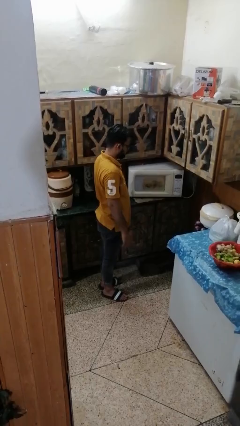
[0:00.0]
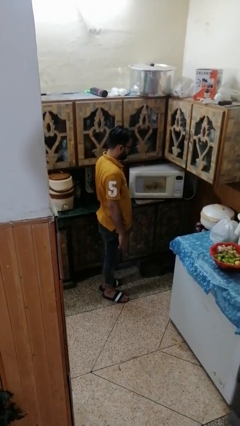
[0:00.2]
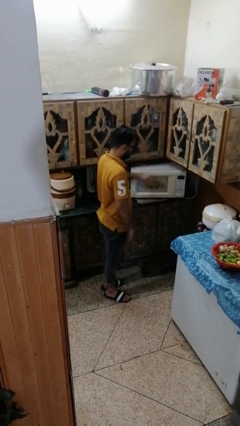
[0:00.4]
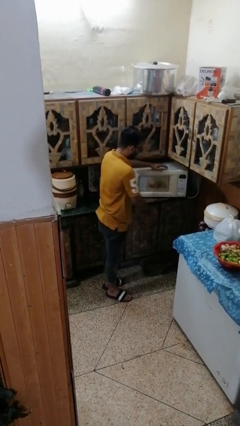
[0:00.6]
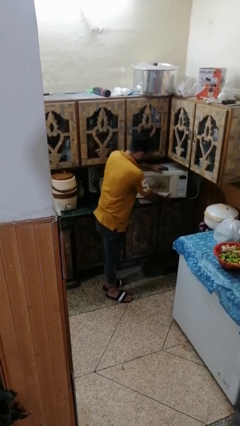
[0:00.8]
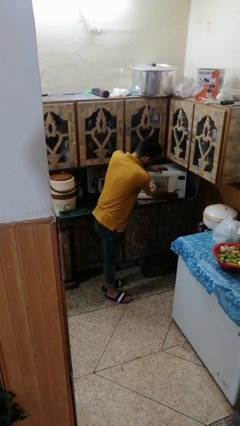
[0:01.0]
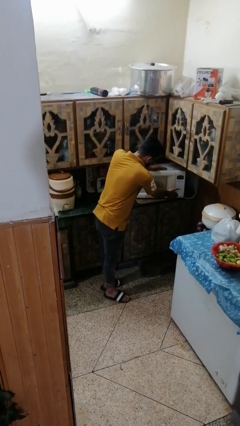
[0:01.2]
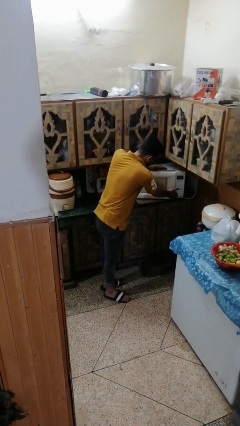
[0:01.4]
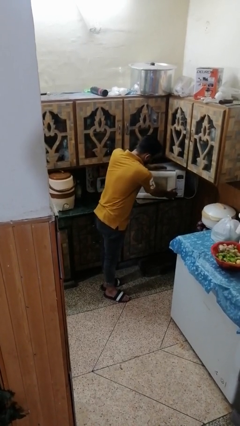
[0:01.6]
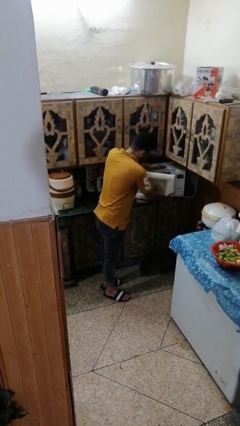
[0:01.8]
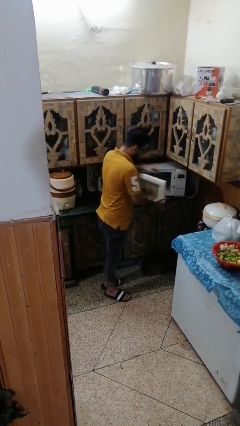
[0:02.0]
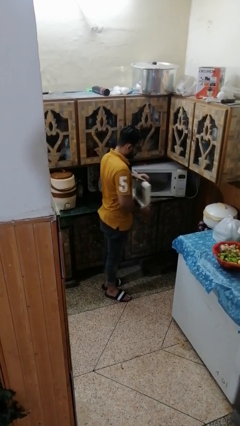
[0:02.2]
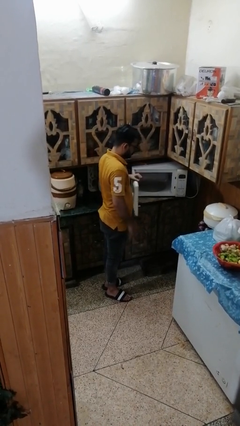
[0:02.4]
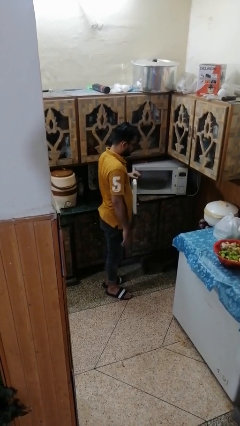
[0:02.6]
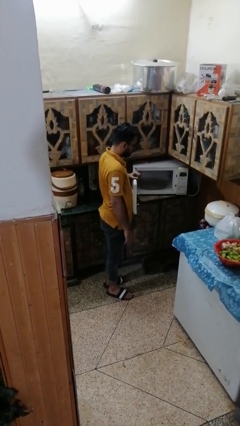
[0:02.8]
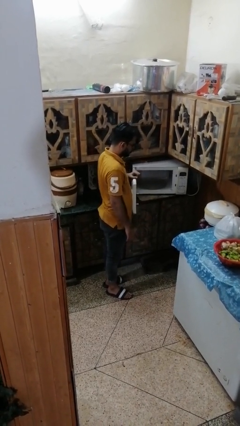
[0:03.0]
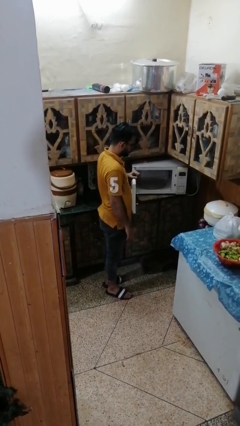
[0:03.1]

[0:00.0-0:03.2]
person opens microwave

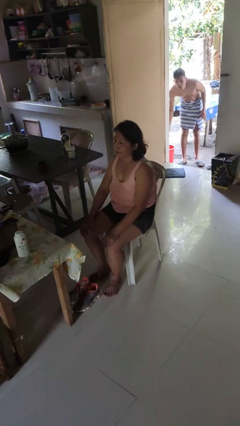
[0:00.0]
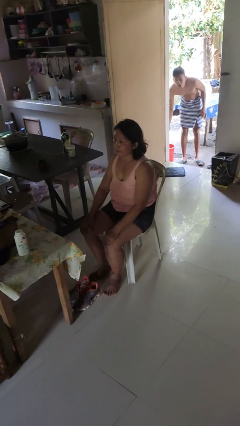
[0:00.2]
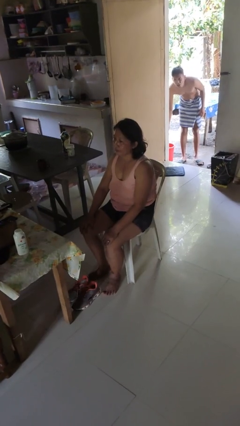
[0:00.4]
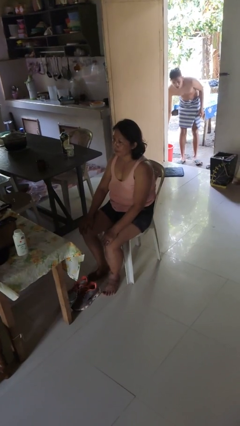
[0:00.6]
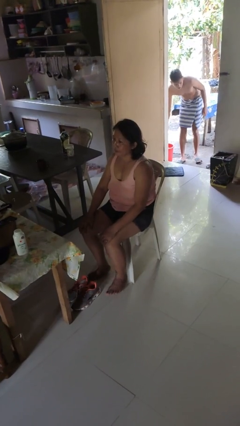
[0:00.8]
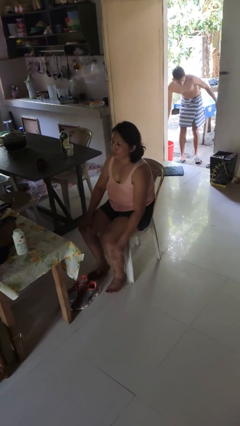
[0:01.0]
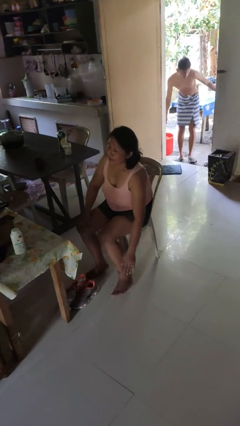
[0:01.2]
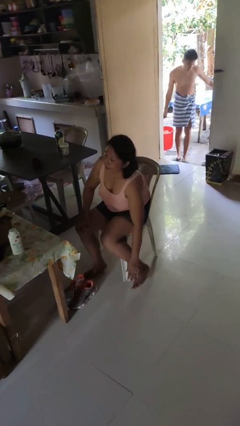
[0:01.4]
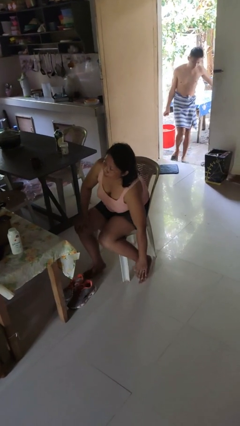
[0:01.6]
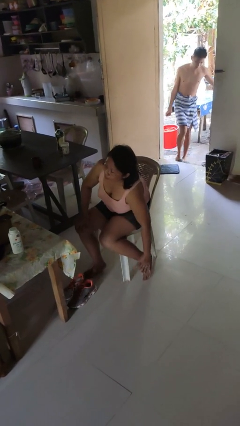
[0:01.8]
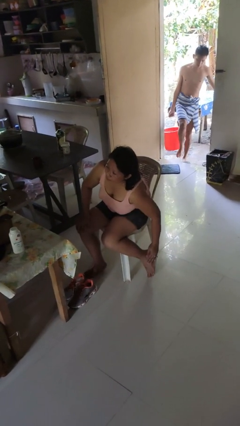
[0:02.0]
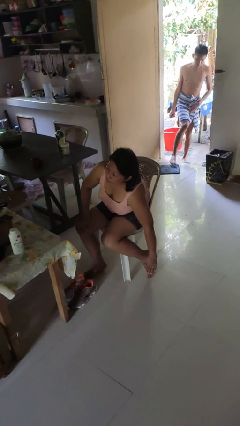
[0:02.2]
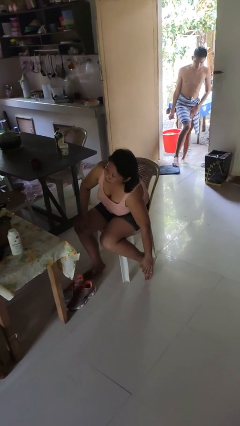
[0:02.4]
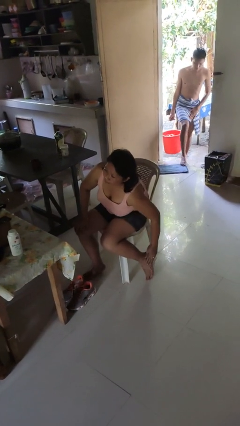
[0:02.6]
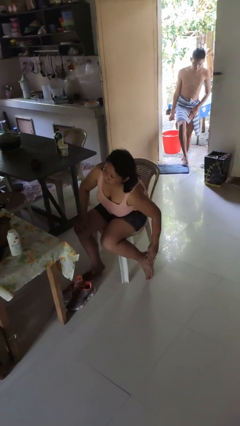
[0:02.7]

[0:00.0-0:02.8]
person rubs foot

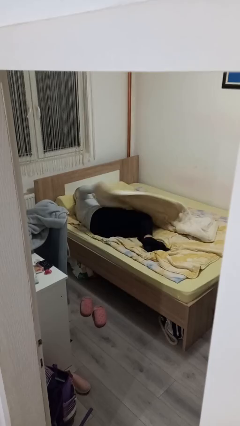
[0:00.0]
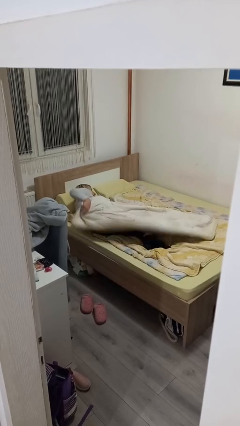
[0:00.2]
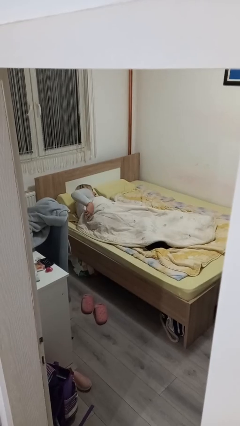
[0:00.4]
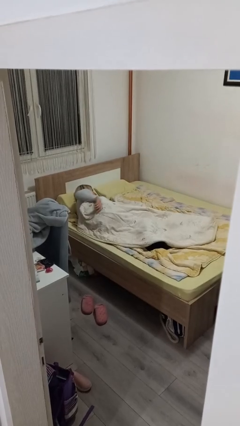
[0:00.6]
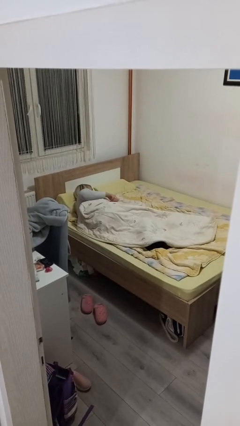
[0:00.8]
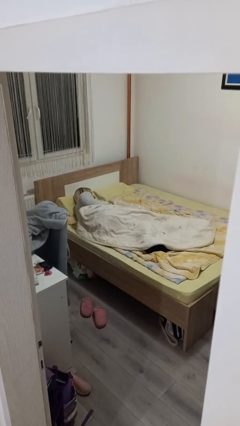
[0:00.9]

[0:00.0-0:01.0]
person covers with bedsheets

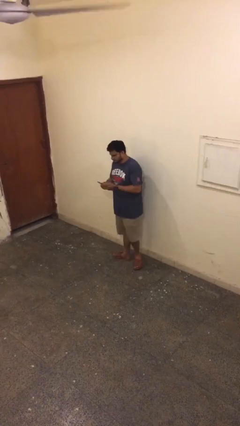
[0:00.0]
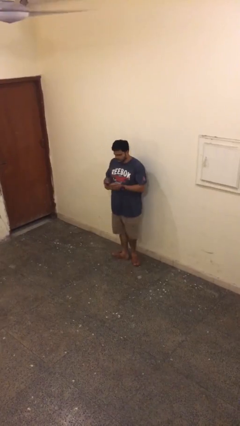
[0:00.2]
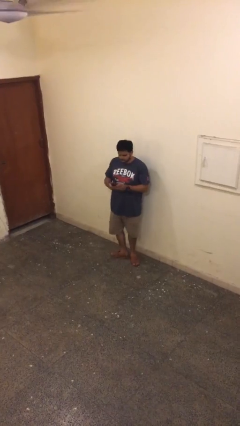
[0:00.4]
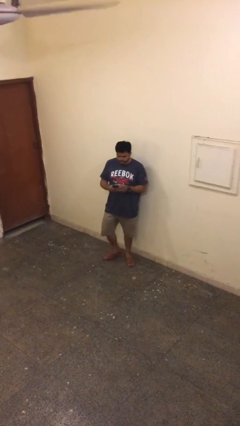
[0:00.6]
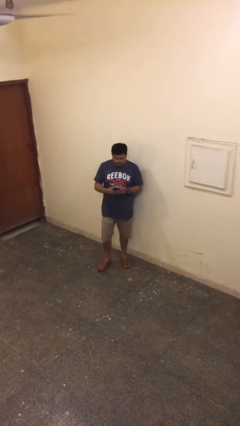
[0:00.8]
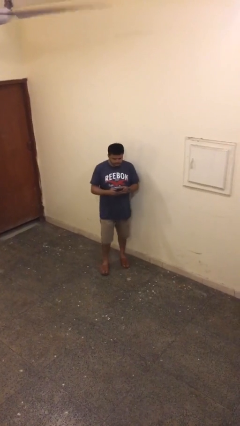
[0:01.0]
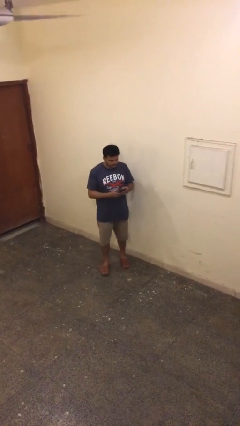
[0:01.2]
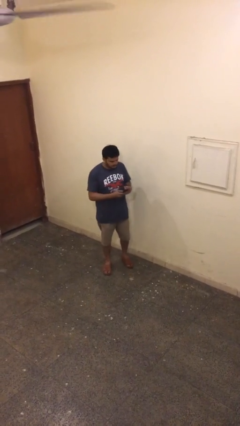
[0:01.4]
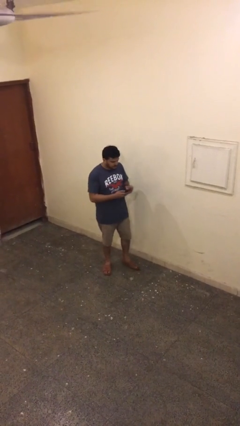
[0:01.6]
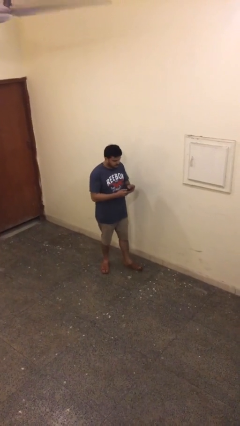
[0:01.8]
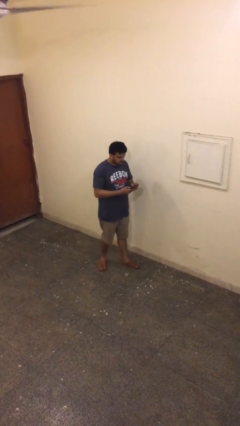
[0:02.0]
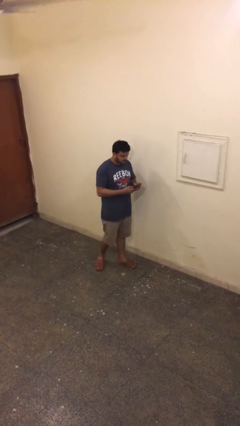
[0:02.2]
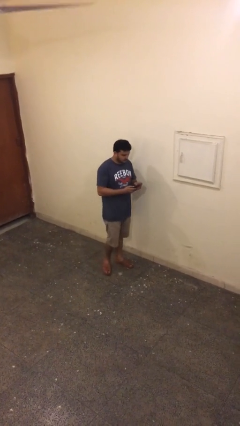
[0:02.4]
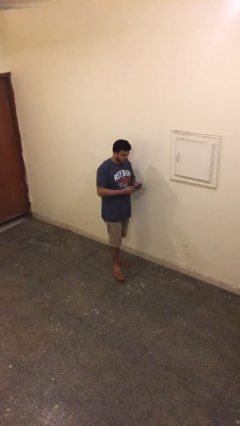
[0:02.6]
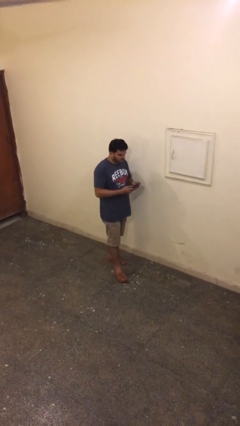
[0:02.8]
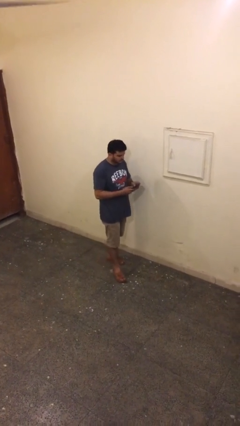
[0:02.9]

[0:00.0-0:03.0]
person talks on phone

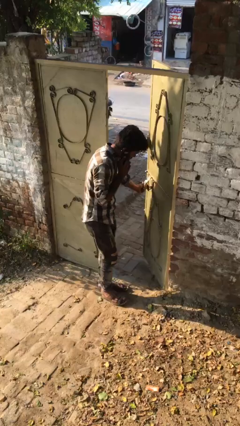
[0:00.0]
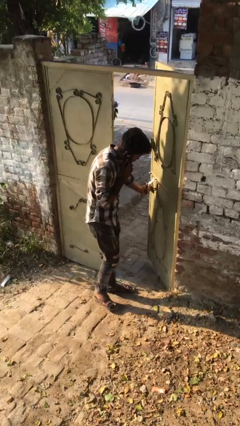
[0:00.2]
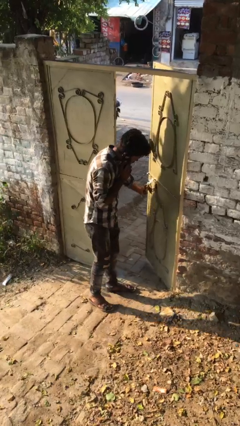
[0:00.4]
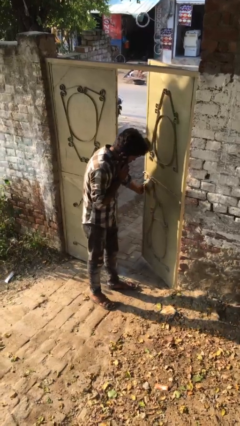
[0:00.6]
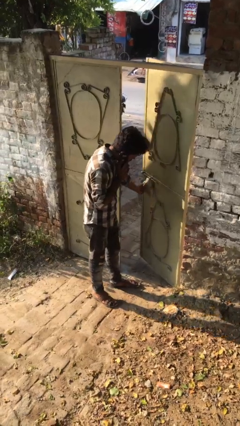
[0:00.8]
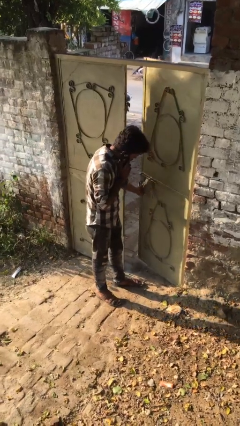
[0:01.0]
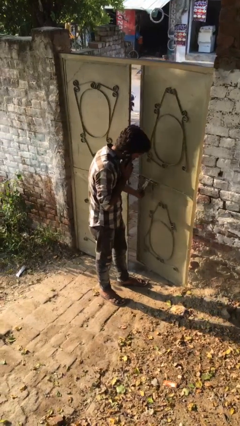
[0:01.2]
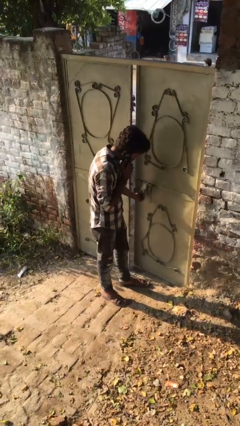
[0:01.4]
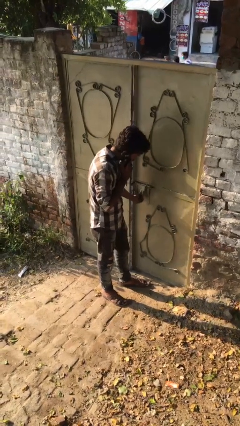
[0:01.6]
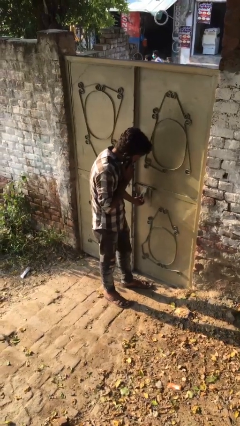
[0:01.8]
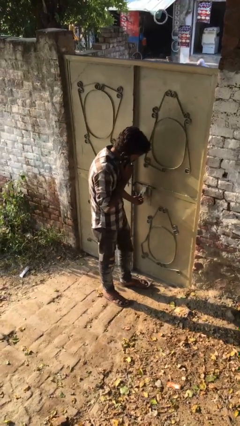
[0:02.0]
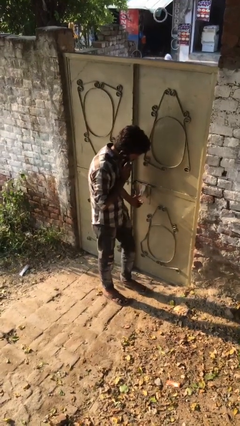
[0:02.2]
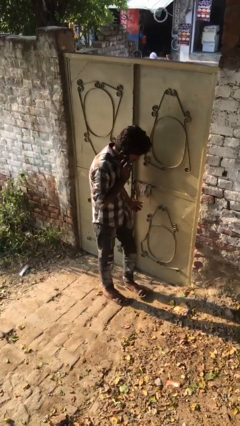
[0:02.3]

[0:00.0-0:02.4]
person closes facility door

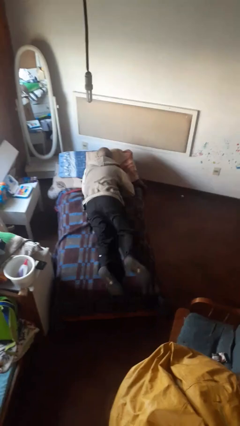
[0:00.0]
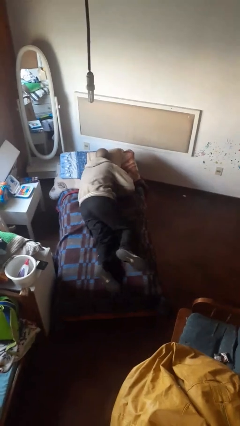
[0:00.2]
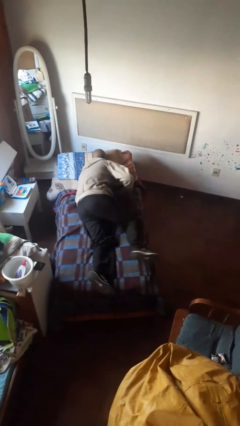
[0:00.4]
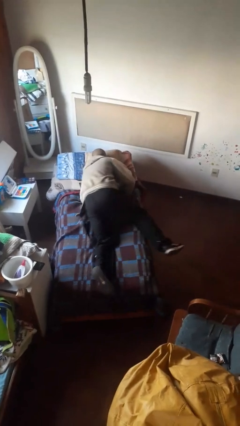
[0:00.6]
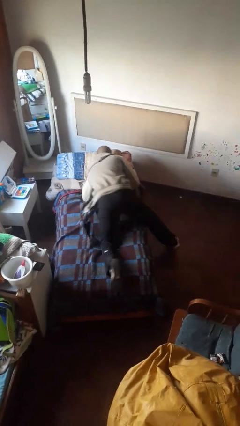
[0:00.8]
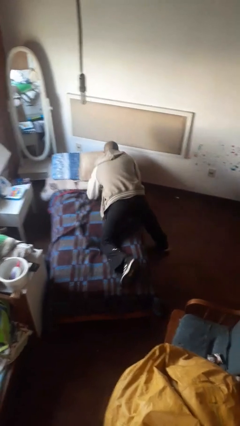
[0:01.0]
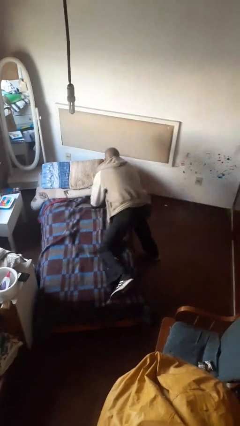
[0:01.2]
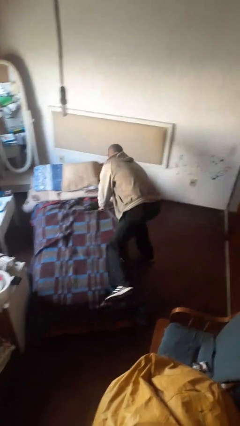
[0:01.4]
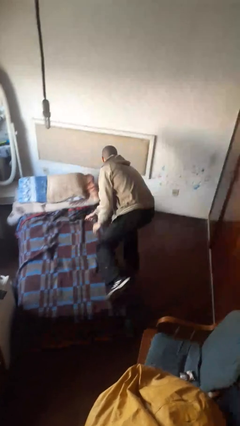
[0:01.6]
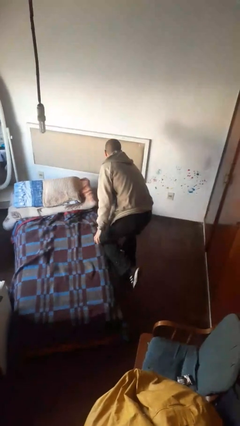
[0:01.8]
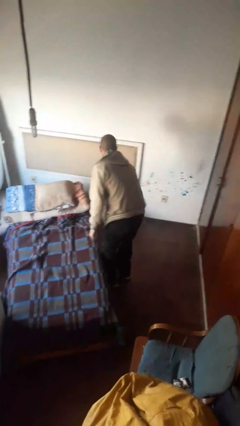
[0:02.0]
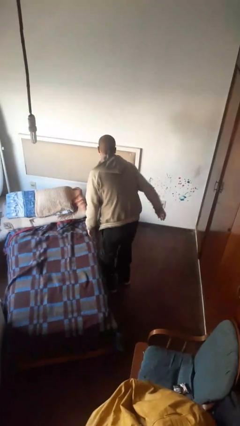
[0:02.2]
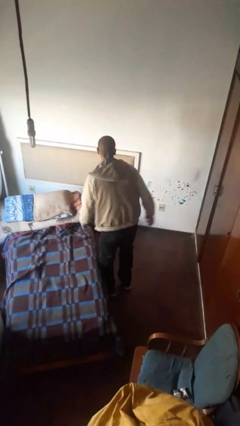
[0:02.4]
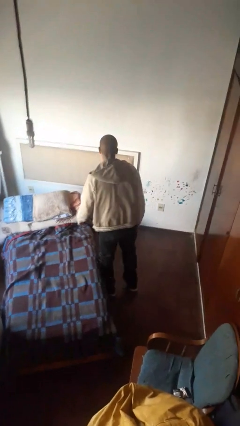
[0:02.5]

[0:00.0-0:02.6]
person stands up

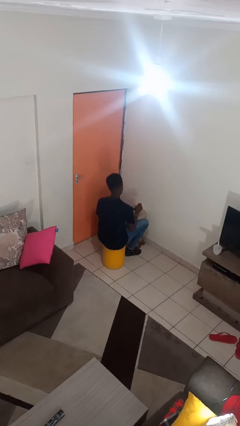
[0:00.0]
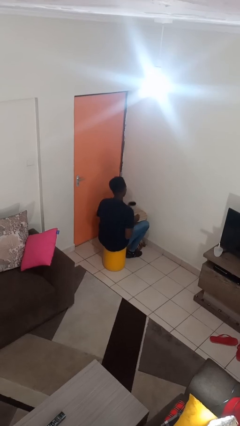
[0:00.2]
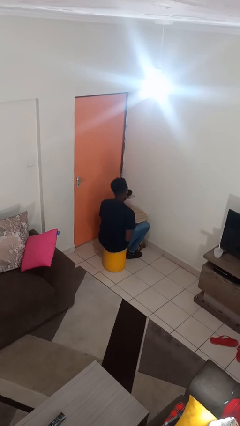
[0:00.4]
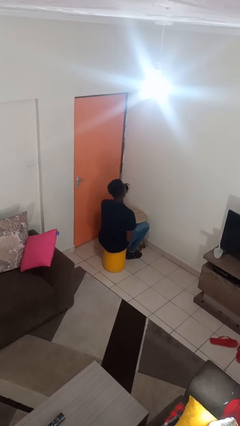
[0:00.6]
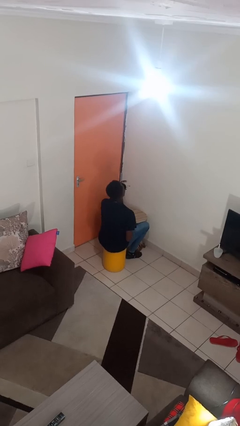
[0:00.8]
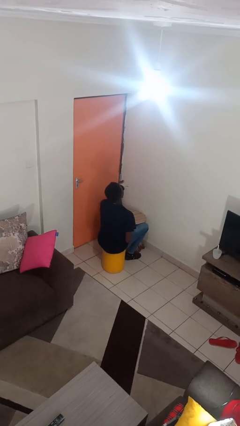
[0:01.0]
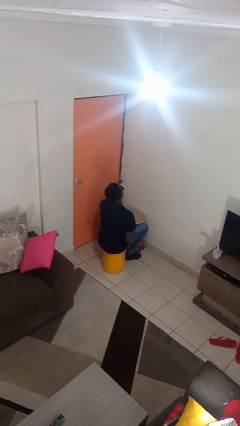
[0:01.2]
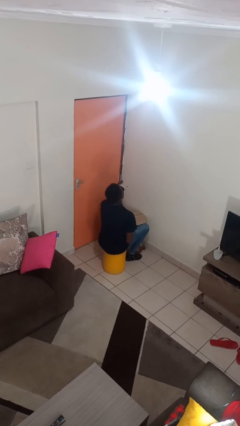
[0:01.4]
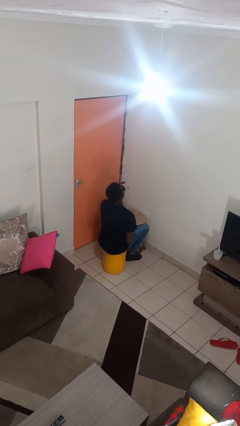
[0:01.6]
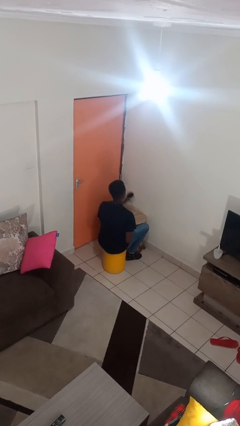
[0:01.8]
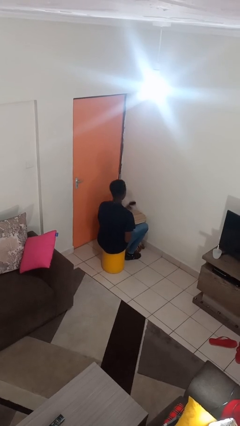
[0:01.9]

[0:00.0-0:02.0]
person drinks from mug

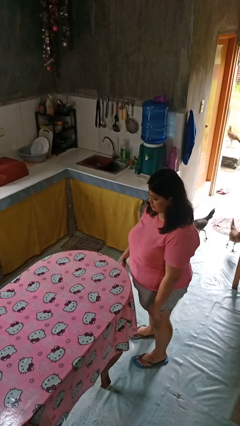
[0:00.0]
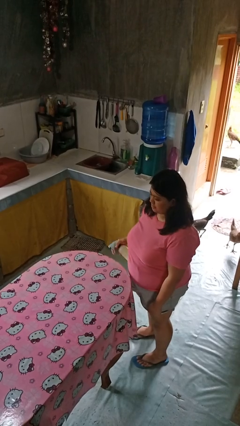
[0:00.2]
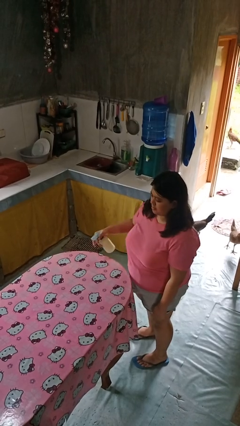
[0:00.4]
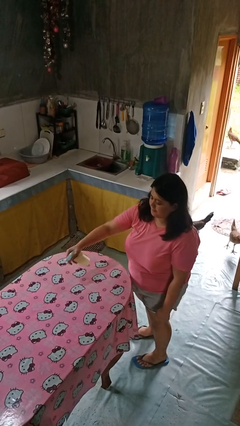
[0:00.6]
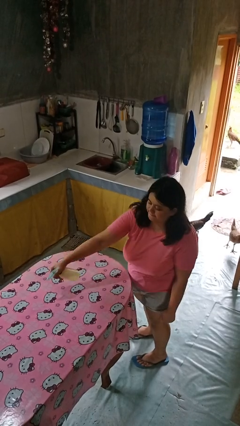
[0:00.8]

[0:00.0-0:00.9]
person sprays from bottle
